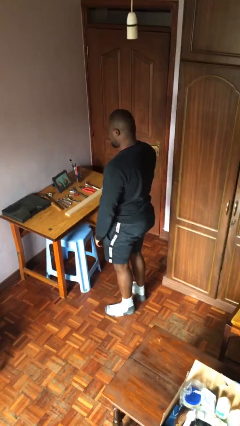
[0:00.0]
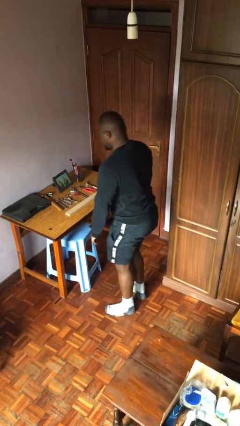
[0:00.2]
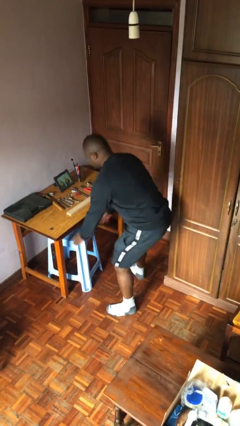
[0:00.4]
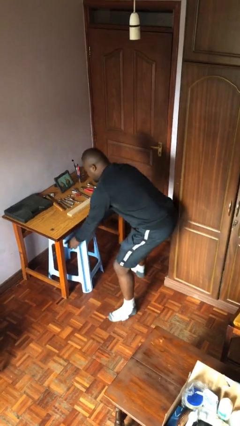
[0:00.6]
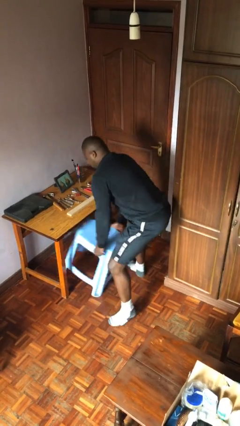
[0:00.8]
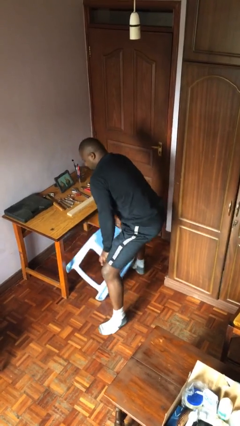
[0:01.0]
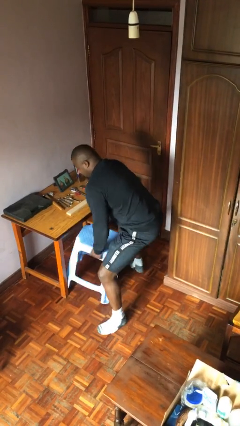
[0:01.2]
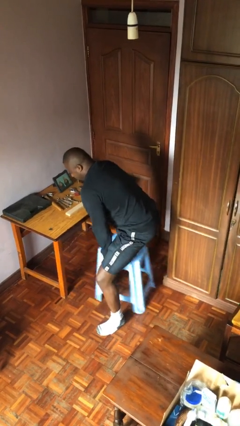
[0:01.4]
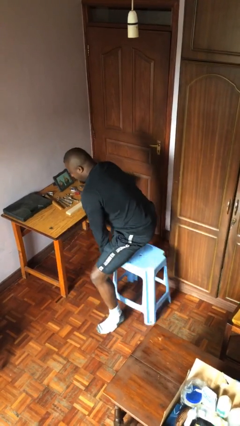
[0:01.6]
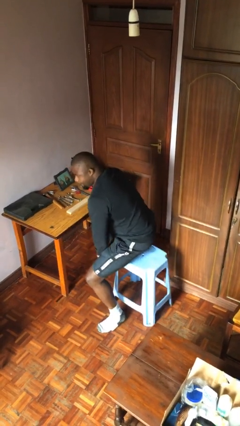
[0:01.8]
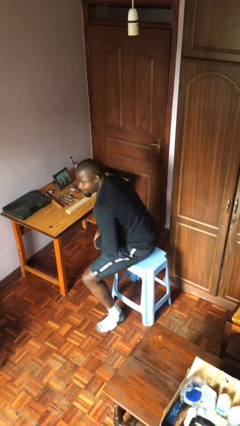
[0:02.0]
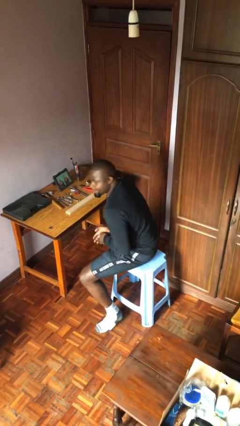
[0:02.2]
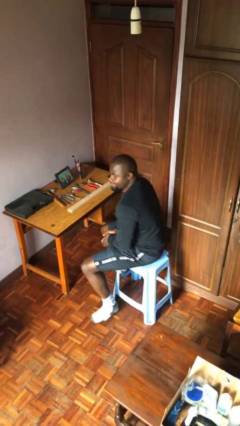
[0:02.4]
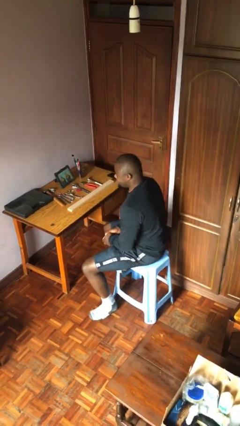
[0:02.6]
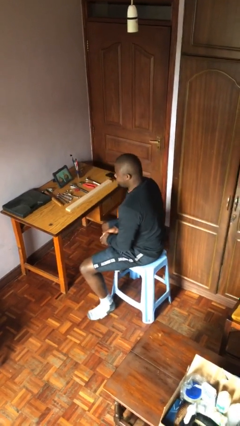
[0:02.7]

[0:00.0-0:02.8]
person sits down

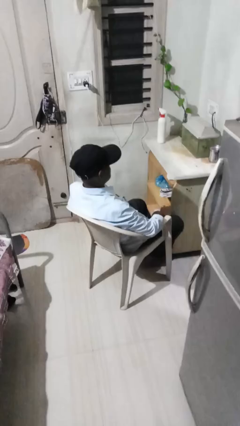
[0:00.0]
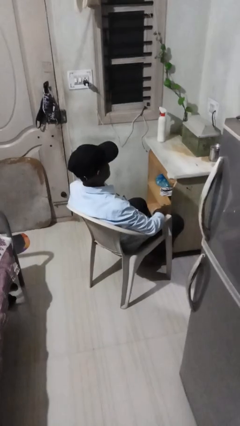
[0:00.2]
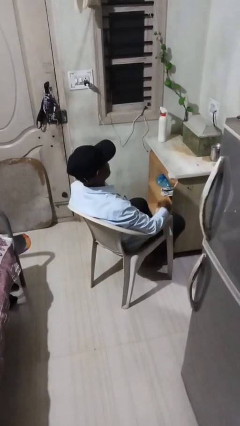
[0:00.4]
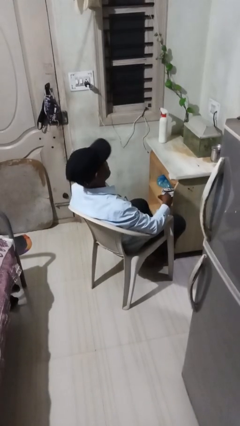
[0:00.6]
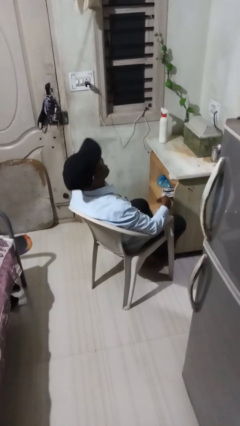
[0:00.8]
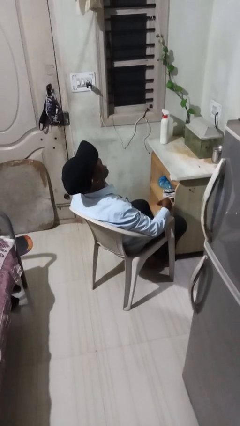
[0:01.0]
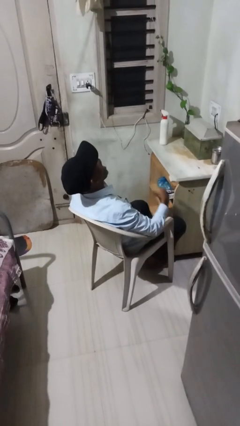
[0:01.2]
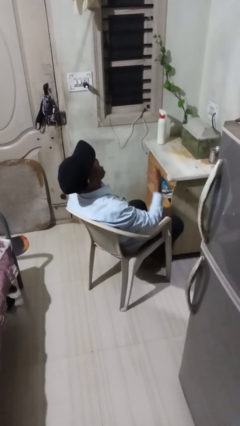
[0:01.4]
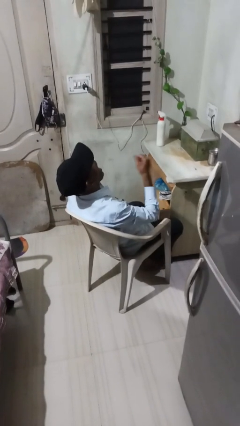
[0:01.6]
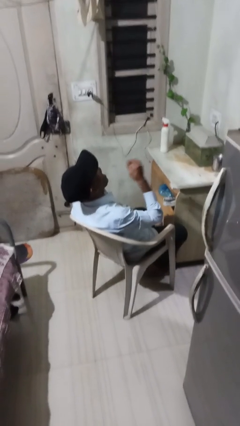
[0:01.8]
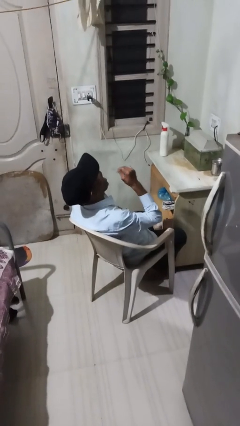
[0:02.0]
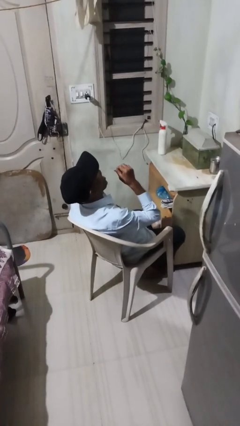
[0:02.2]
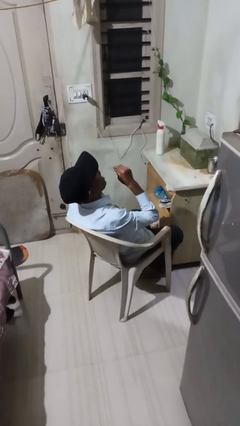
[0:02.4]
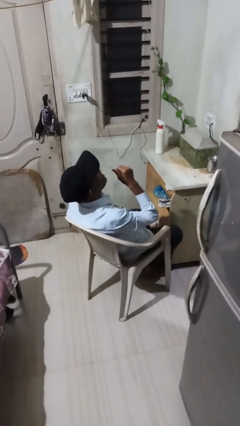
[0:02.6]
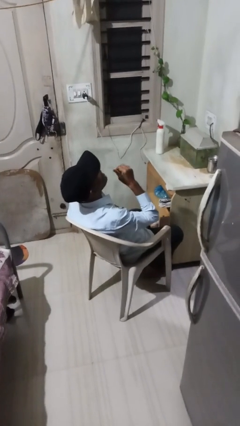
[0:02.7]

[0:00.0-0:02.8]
person yawns

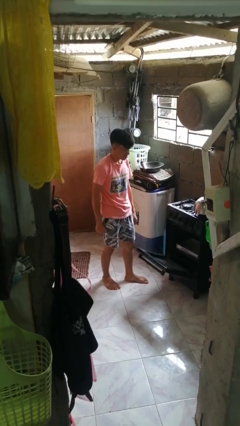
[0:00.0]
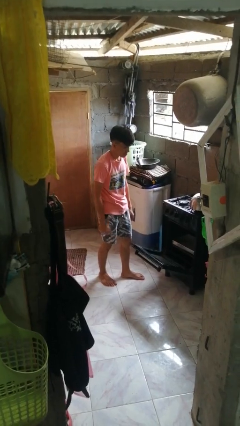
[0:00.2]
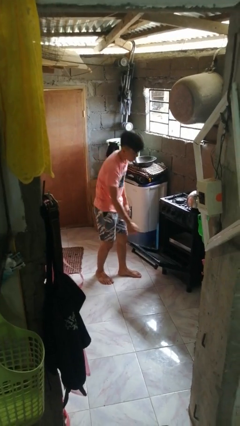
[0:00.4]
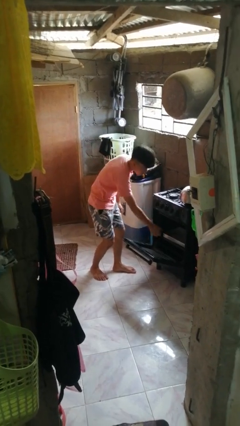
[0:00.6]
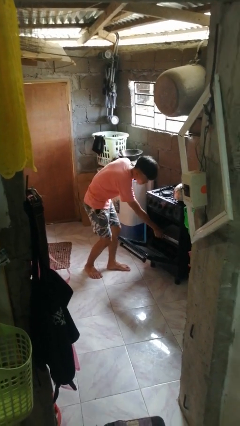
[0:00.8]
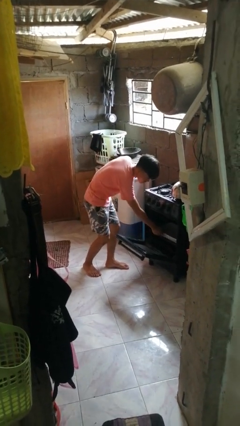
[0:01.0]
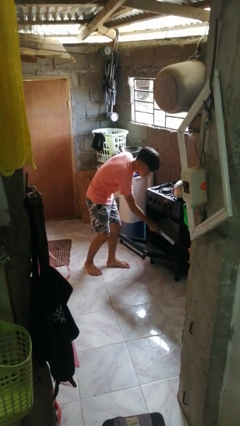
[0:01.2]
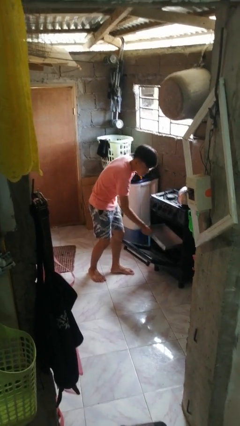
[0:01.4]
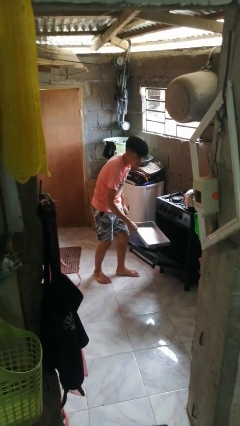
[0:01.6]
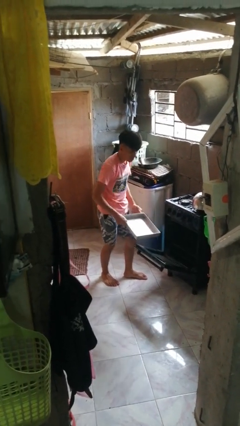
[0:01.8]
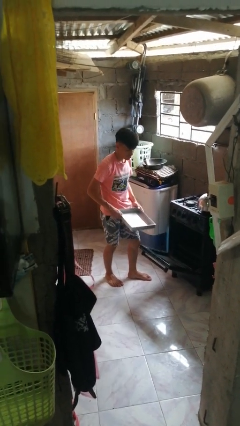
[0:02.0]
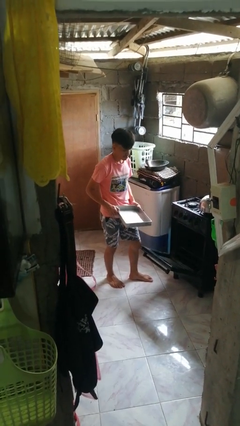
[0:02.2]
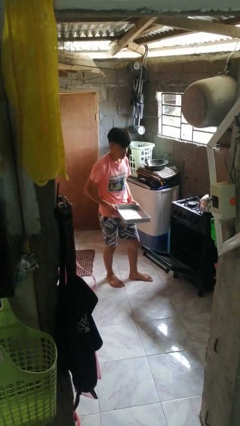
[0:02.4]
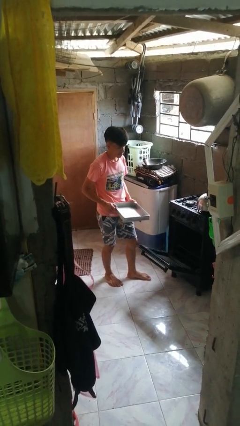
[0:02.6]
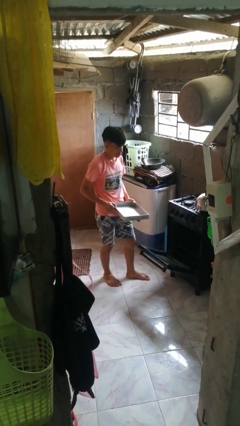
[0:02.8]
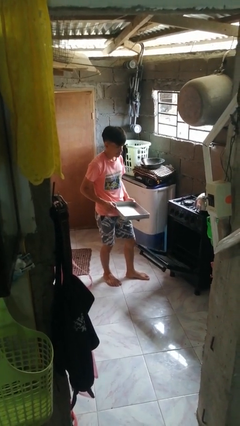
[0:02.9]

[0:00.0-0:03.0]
person takes object from oven

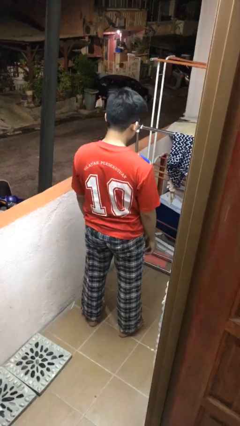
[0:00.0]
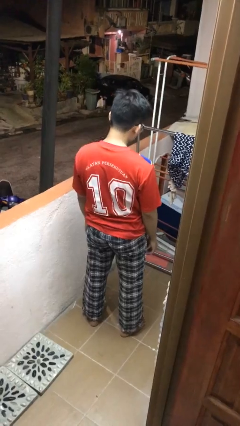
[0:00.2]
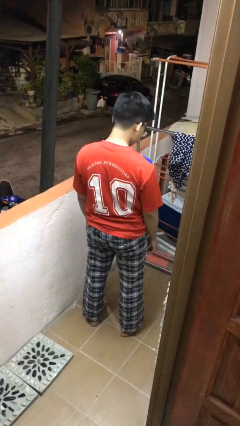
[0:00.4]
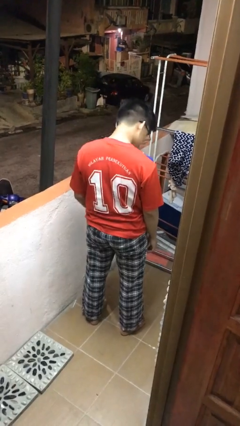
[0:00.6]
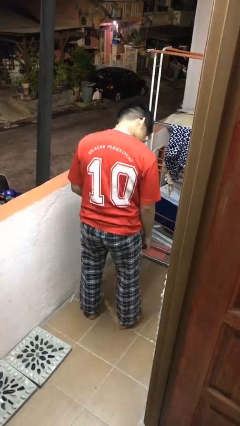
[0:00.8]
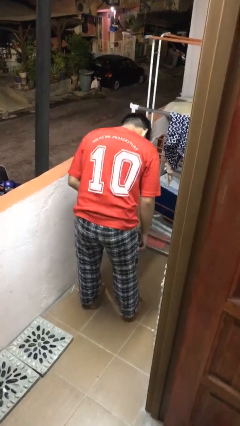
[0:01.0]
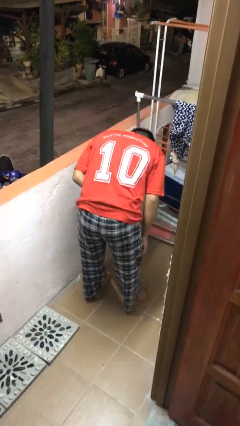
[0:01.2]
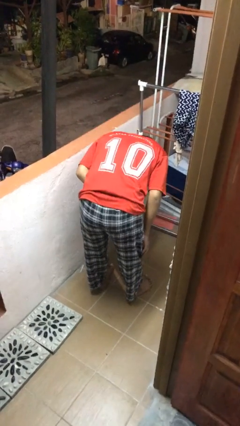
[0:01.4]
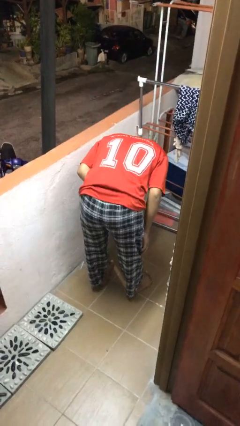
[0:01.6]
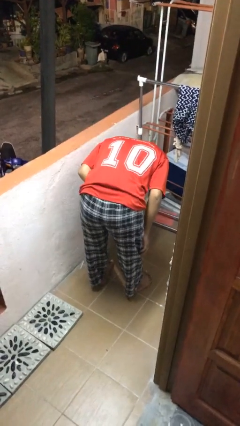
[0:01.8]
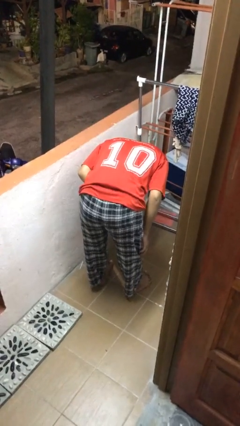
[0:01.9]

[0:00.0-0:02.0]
person bows

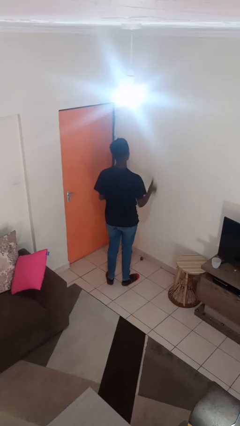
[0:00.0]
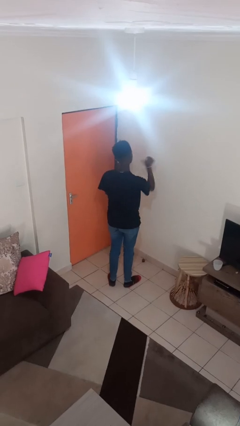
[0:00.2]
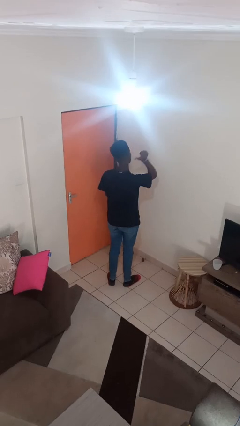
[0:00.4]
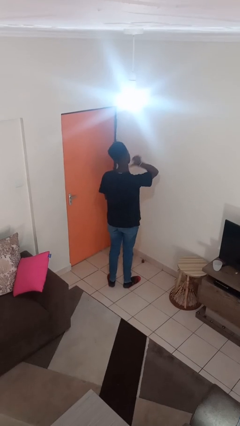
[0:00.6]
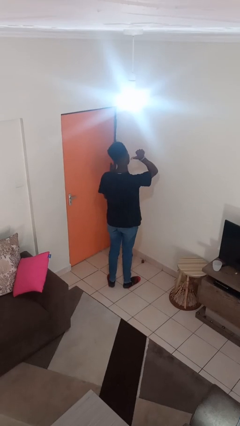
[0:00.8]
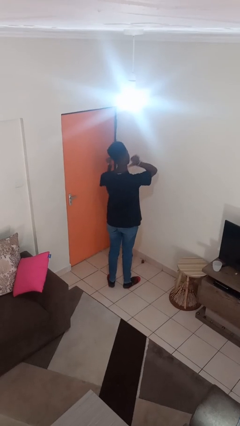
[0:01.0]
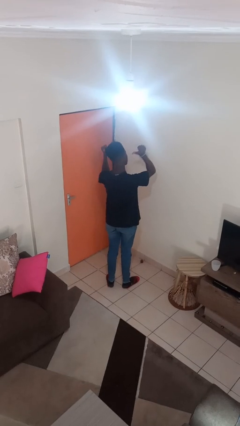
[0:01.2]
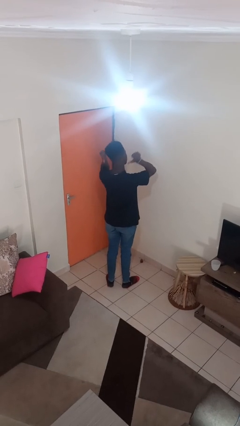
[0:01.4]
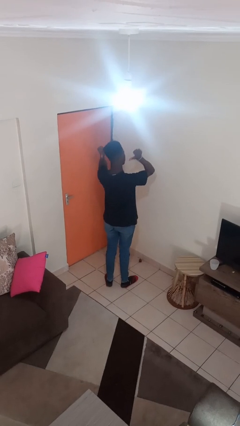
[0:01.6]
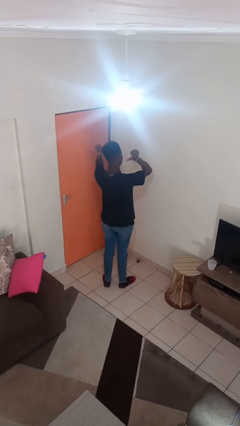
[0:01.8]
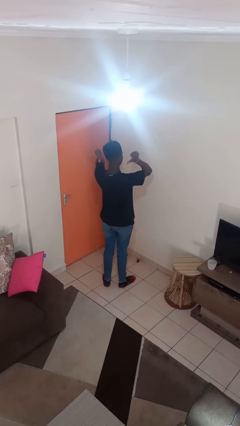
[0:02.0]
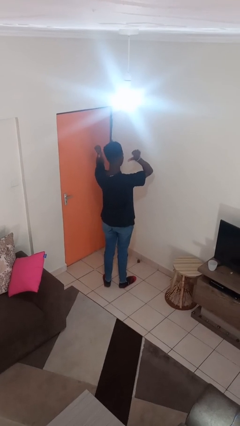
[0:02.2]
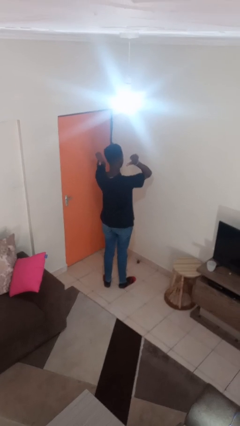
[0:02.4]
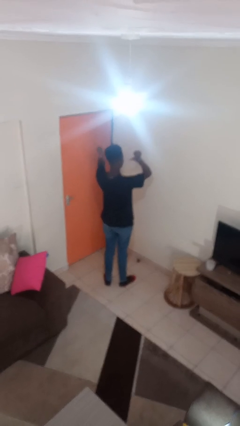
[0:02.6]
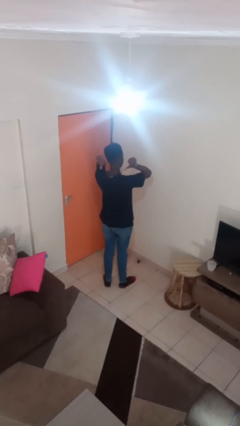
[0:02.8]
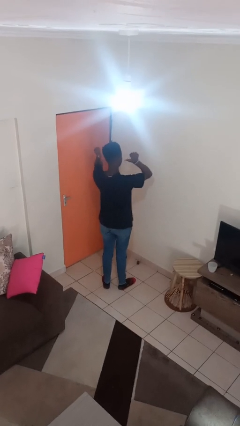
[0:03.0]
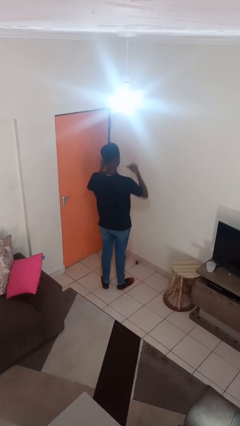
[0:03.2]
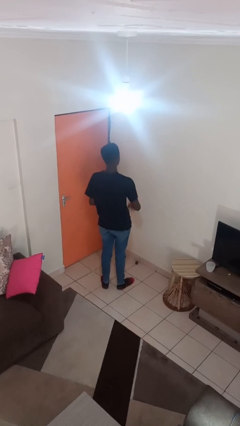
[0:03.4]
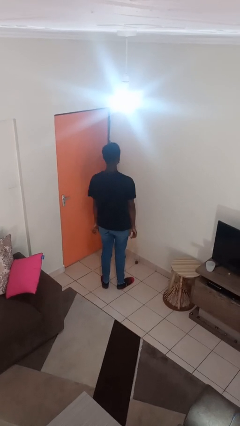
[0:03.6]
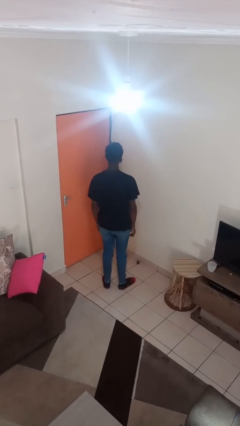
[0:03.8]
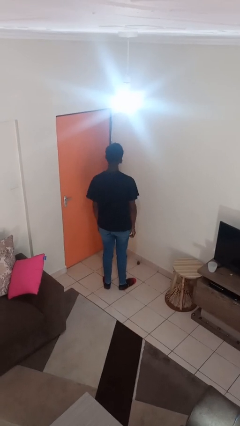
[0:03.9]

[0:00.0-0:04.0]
person gestures behind me

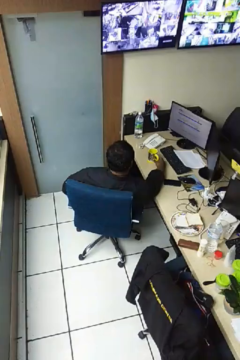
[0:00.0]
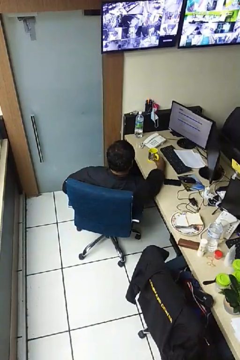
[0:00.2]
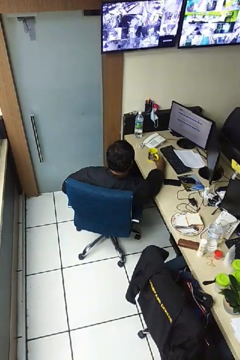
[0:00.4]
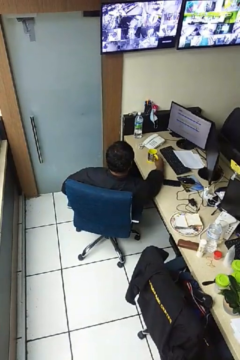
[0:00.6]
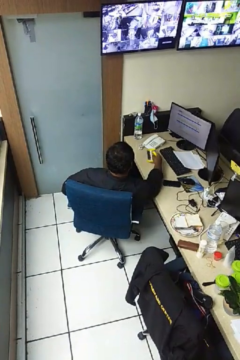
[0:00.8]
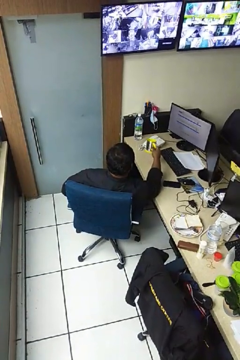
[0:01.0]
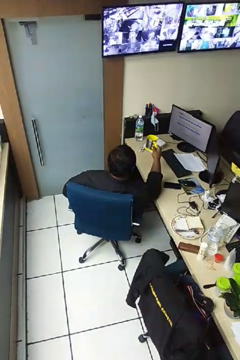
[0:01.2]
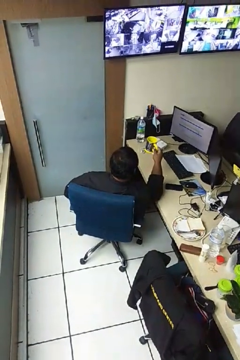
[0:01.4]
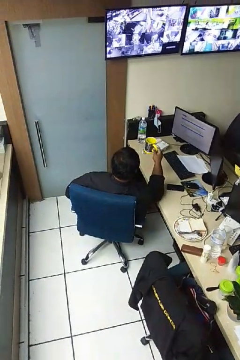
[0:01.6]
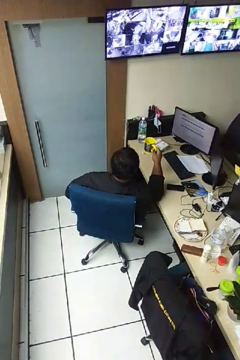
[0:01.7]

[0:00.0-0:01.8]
person picks up object from table

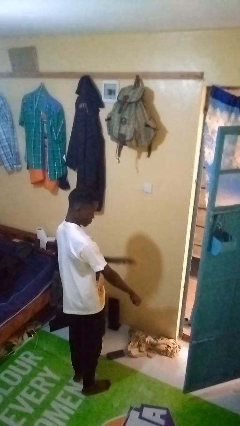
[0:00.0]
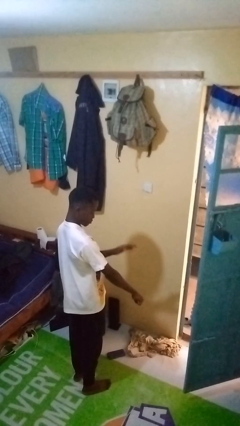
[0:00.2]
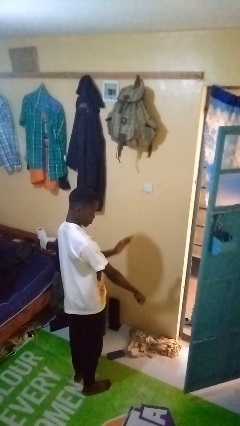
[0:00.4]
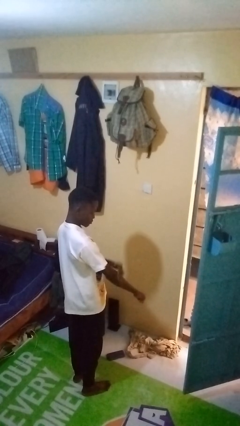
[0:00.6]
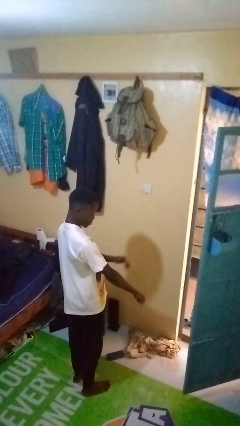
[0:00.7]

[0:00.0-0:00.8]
person swats bug
